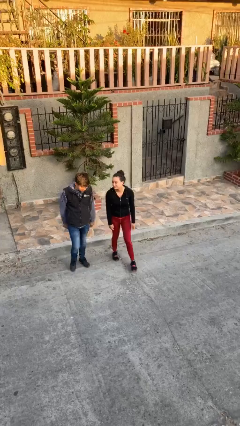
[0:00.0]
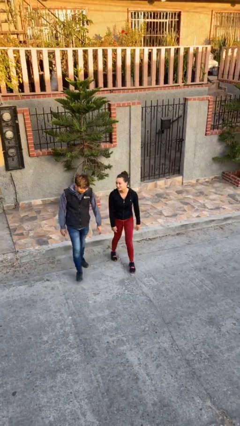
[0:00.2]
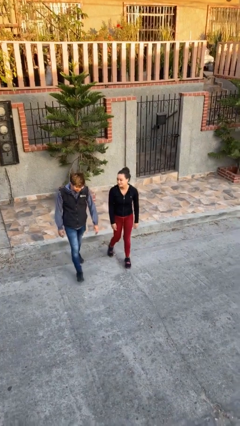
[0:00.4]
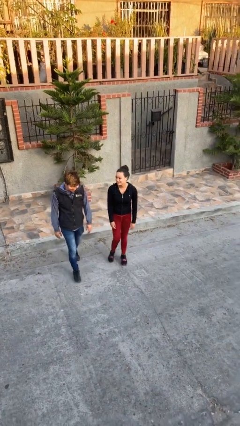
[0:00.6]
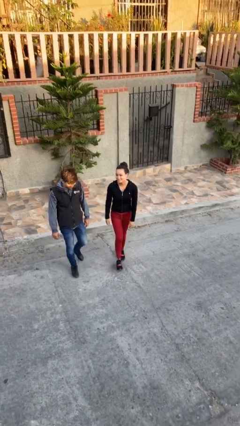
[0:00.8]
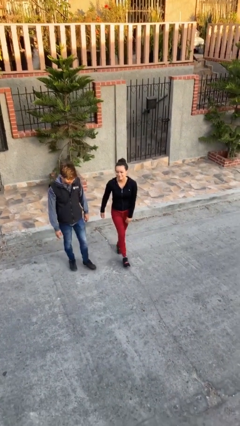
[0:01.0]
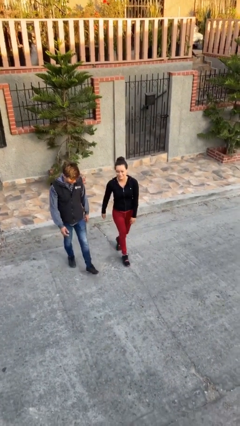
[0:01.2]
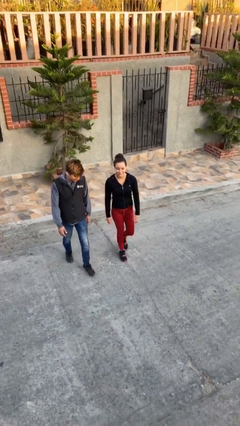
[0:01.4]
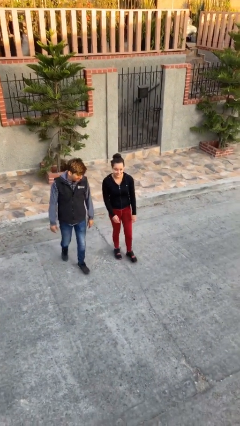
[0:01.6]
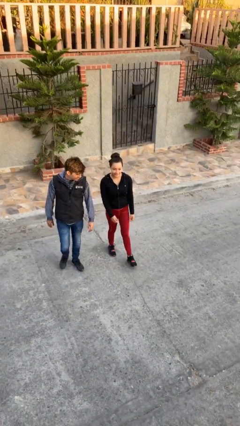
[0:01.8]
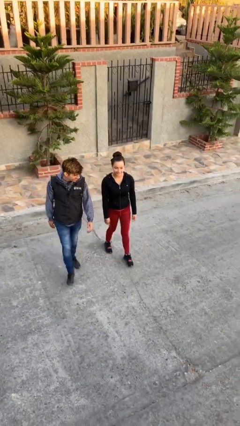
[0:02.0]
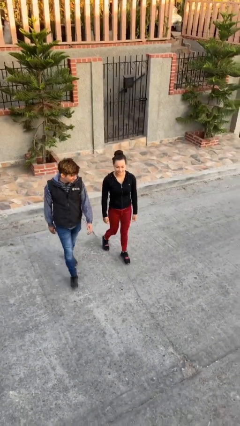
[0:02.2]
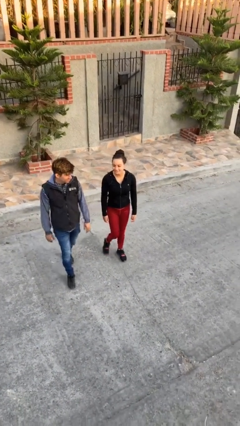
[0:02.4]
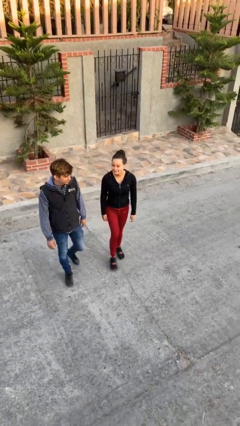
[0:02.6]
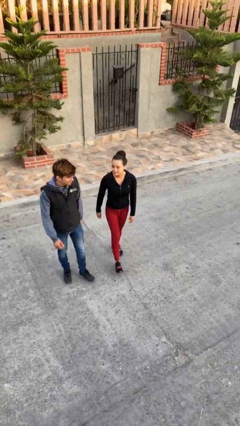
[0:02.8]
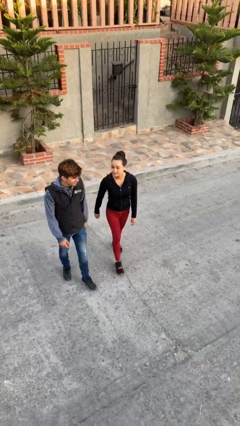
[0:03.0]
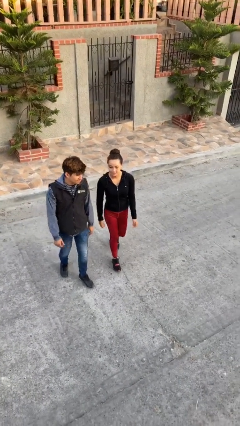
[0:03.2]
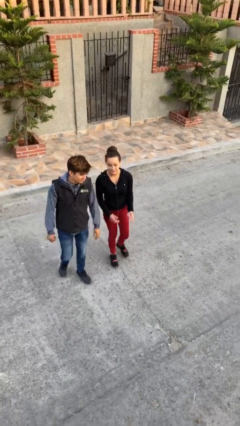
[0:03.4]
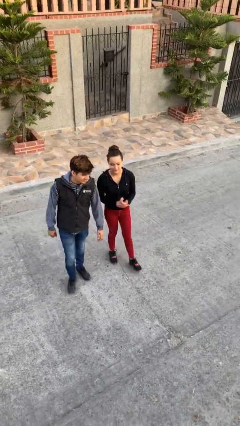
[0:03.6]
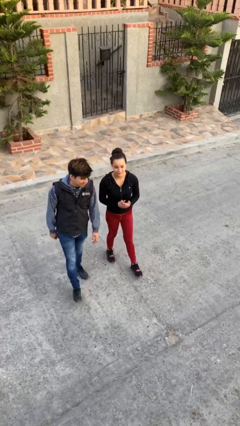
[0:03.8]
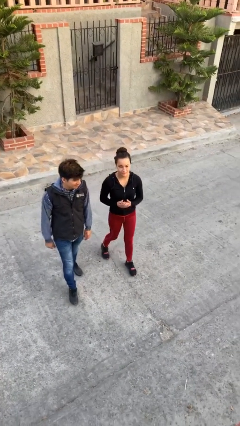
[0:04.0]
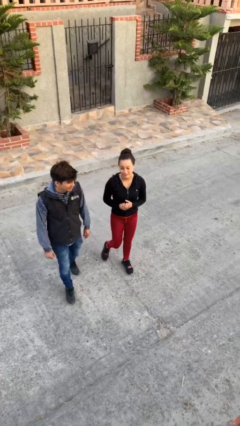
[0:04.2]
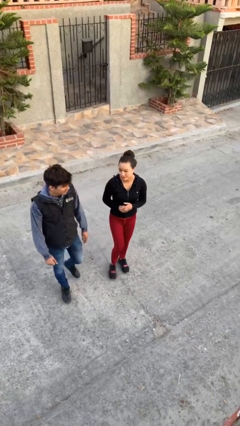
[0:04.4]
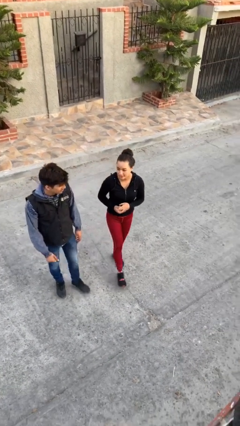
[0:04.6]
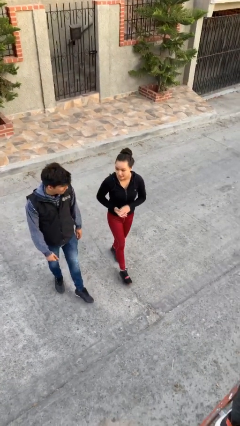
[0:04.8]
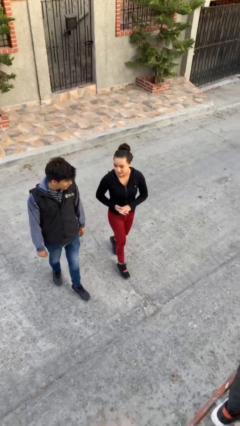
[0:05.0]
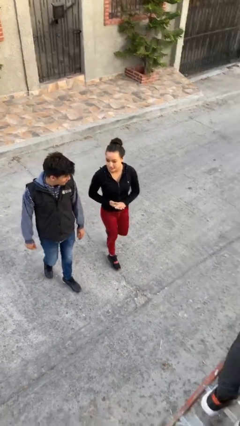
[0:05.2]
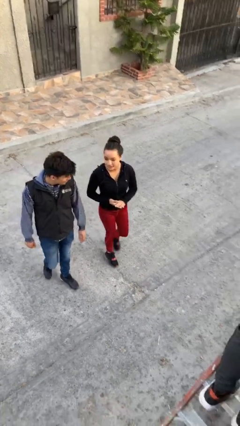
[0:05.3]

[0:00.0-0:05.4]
person talks to person

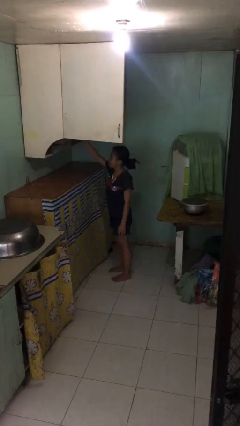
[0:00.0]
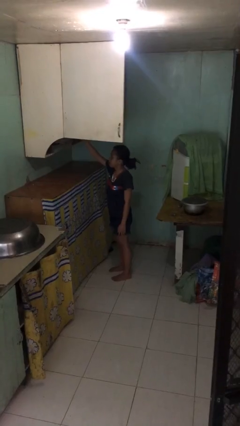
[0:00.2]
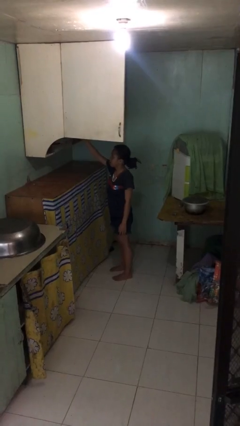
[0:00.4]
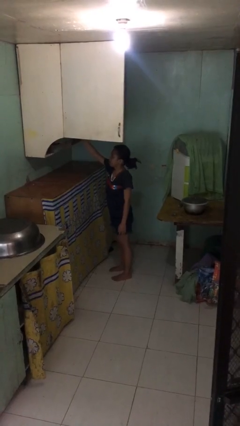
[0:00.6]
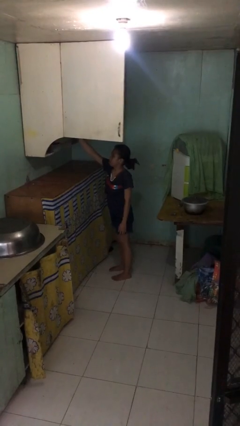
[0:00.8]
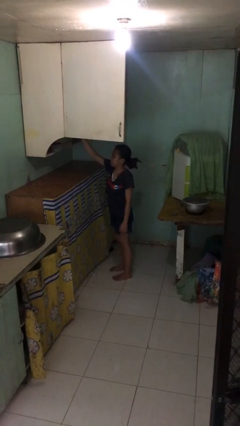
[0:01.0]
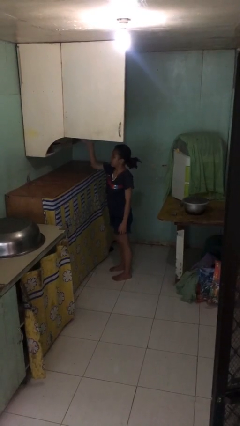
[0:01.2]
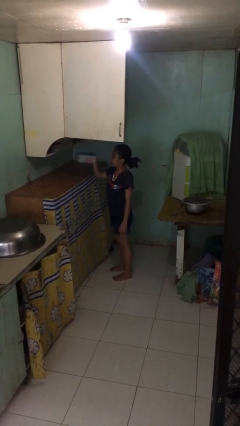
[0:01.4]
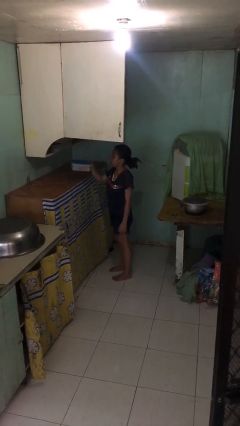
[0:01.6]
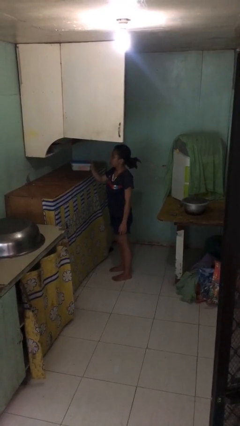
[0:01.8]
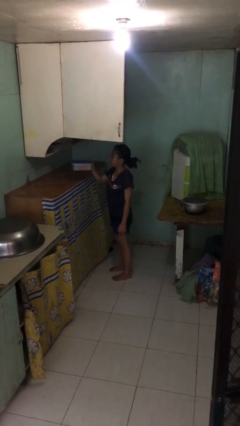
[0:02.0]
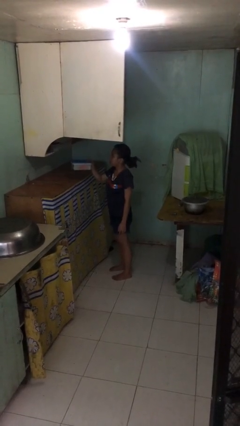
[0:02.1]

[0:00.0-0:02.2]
person picks up object from shelf

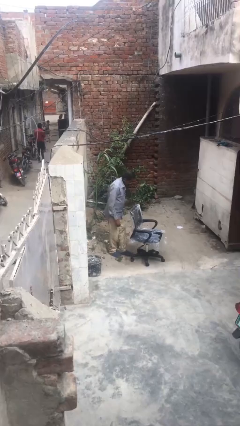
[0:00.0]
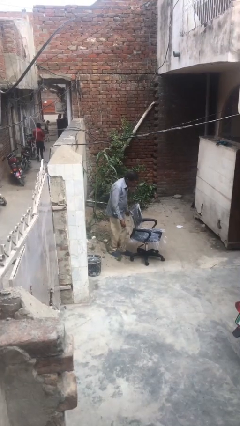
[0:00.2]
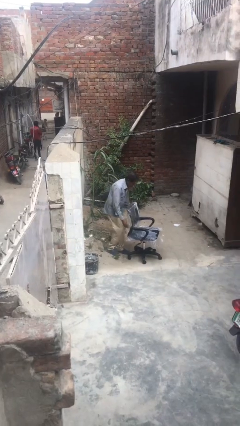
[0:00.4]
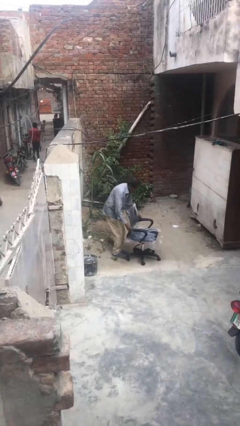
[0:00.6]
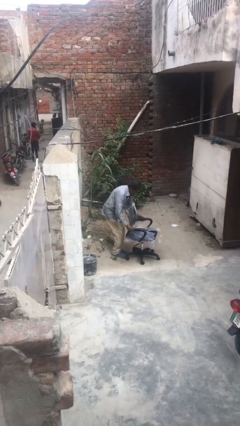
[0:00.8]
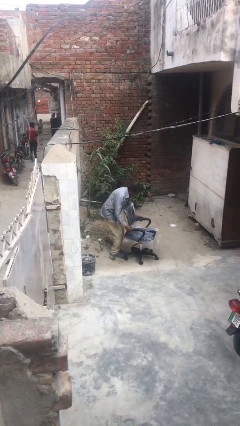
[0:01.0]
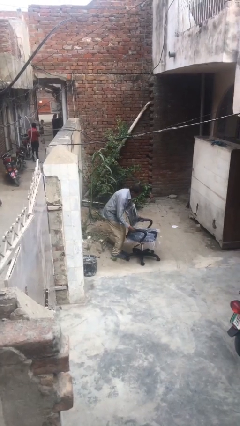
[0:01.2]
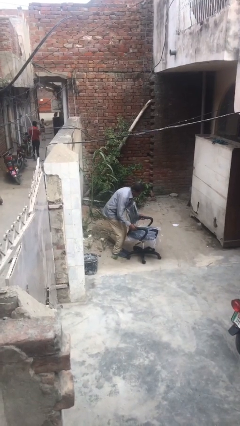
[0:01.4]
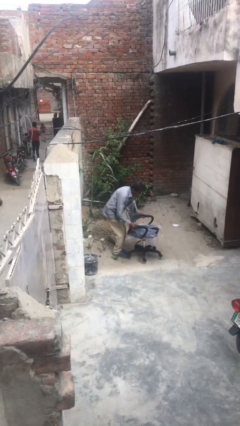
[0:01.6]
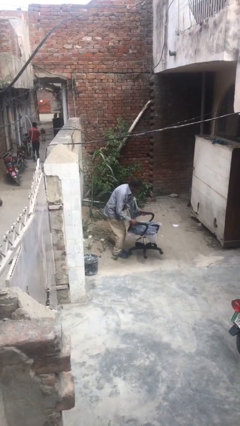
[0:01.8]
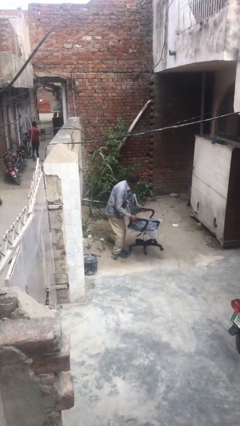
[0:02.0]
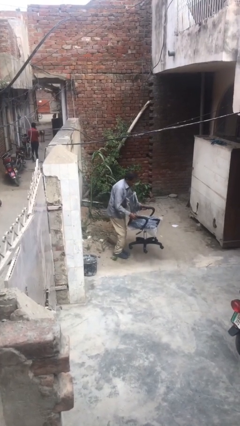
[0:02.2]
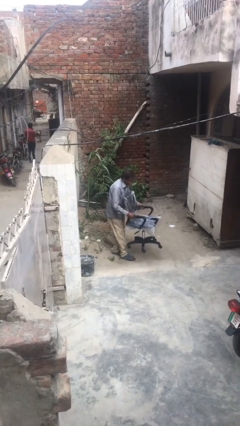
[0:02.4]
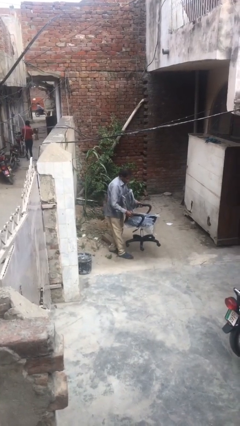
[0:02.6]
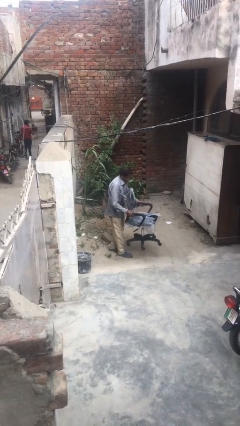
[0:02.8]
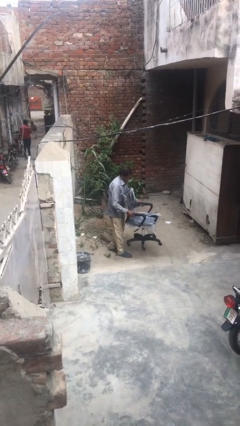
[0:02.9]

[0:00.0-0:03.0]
person picks up object from floor

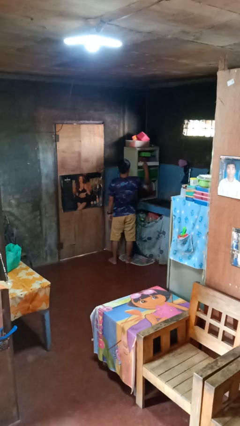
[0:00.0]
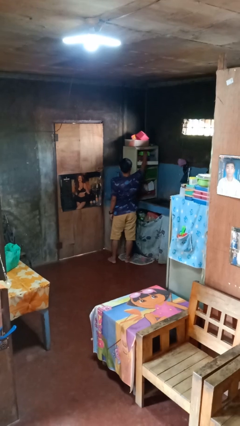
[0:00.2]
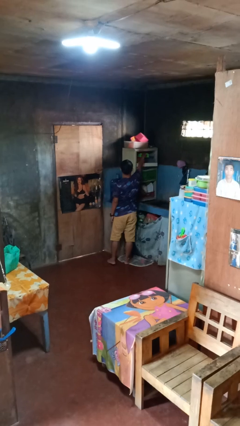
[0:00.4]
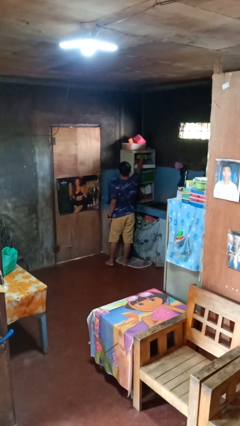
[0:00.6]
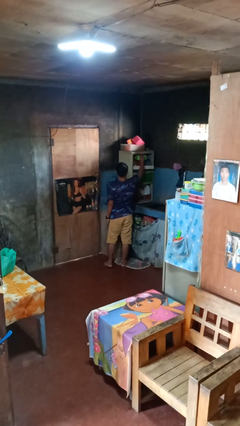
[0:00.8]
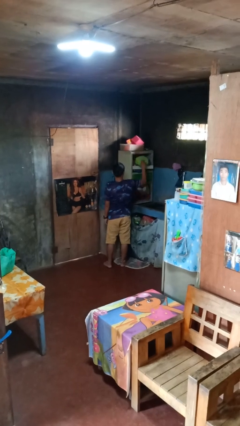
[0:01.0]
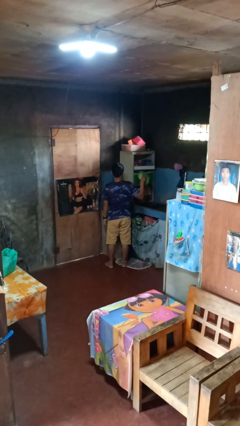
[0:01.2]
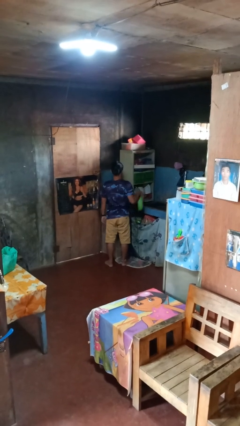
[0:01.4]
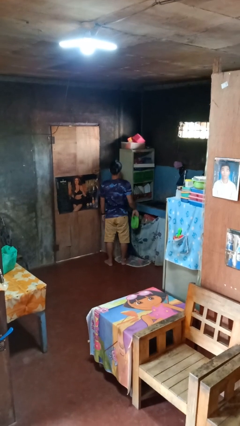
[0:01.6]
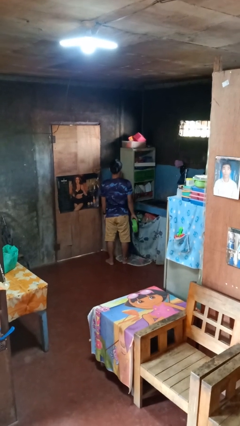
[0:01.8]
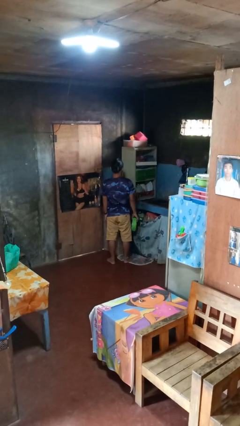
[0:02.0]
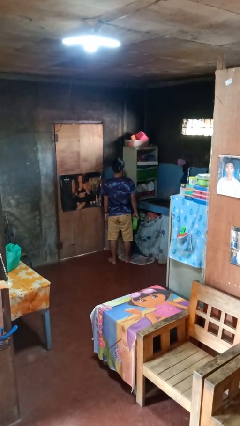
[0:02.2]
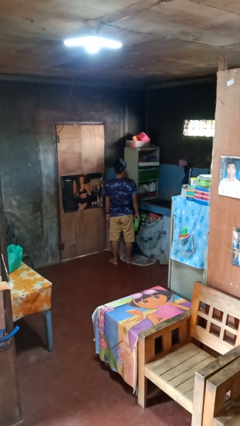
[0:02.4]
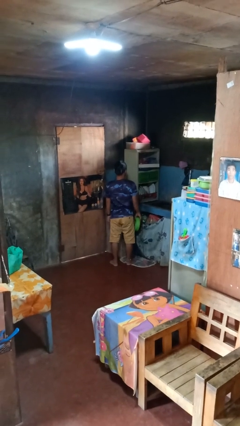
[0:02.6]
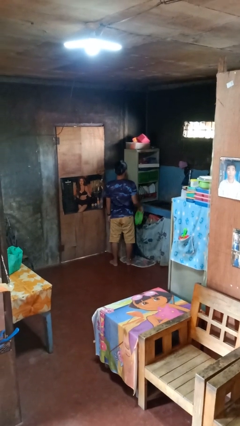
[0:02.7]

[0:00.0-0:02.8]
person takes object from cabinet

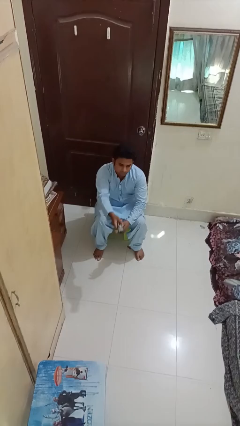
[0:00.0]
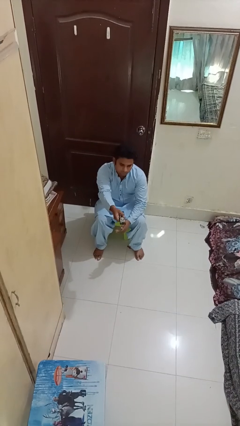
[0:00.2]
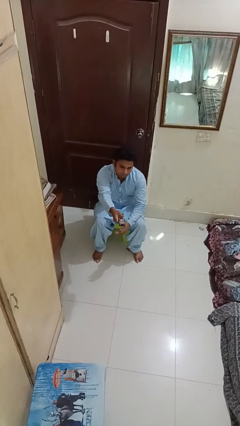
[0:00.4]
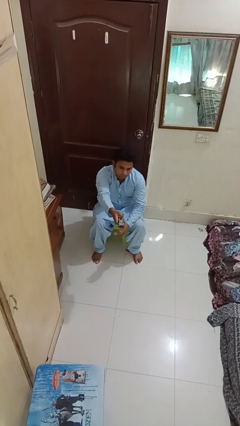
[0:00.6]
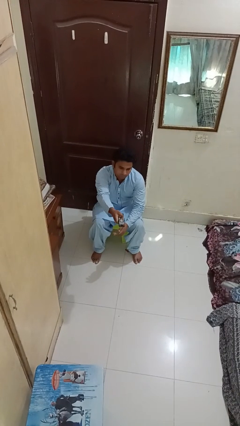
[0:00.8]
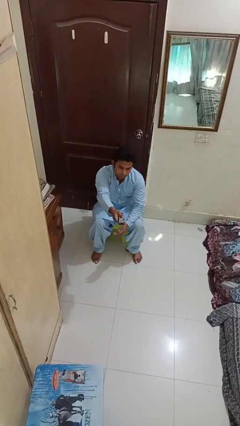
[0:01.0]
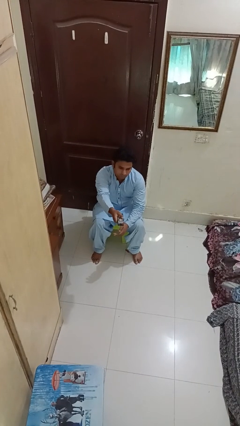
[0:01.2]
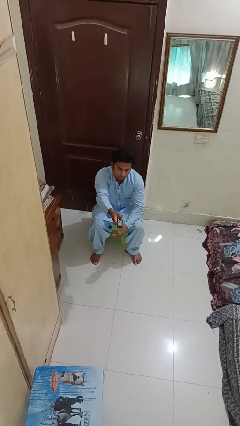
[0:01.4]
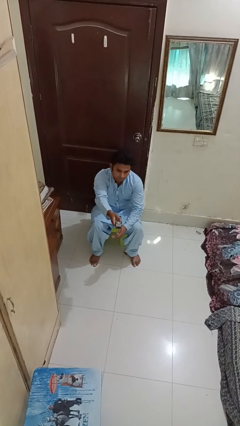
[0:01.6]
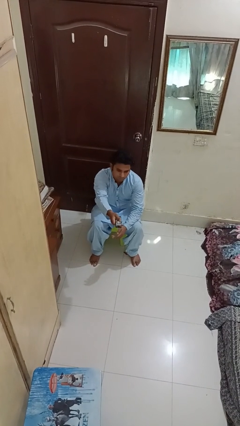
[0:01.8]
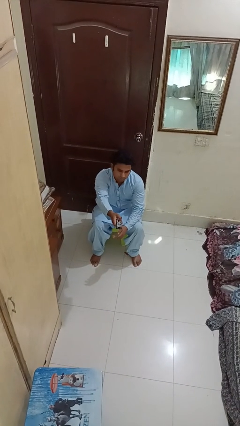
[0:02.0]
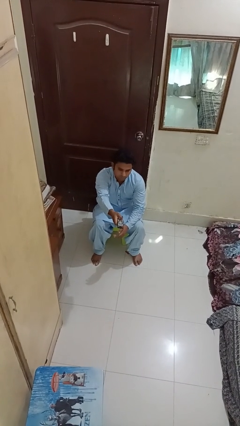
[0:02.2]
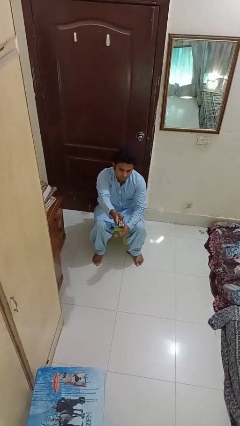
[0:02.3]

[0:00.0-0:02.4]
person uses television remote

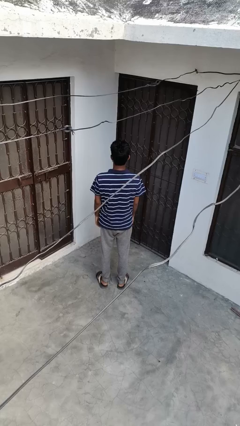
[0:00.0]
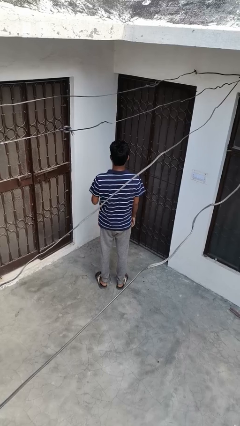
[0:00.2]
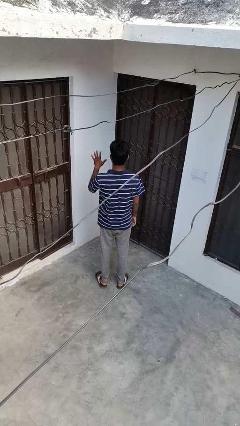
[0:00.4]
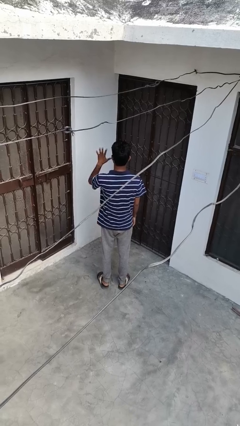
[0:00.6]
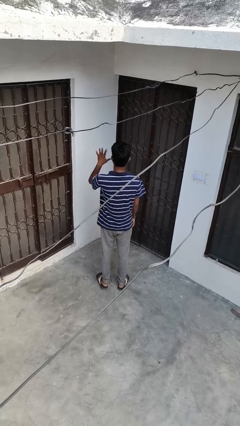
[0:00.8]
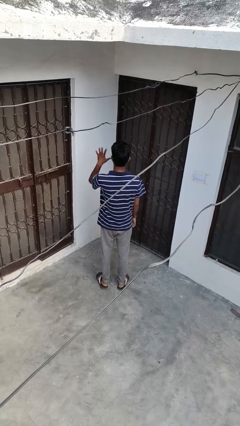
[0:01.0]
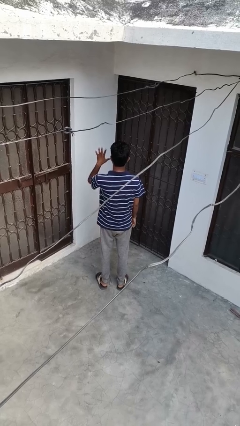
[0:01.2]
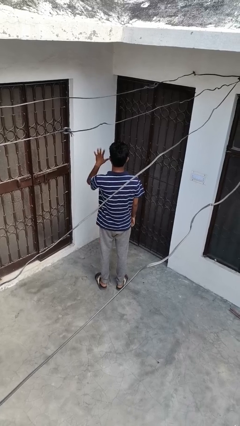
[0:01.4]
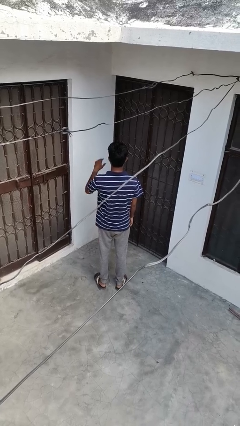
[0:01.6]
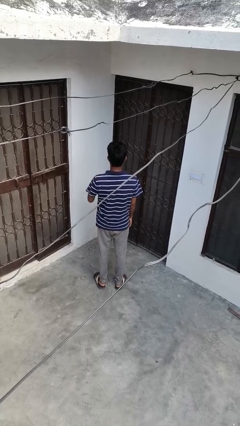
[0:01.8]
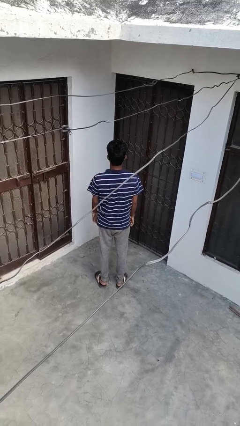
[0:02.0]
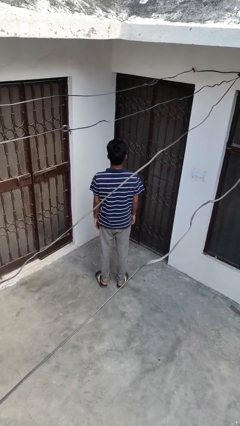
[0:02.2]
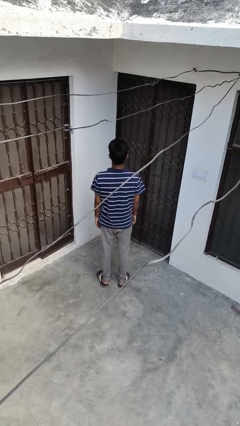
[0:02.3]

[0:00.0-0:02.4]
person gestures number five
